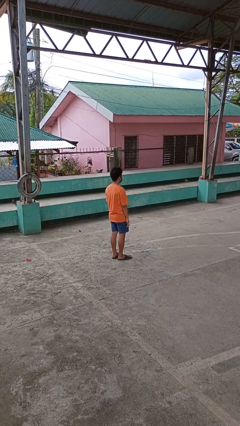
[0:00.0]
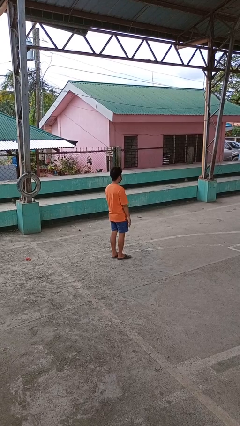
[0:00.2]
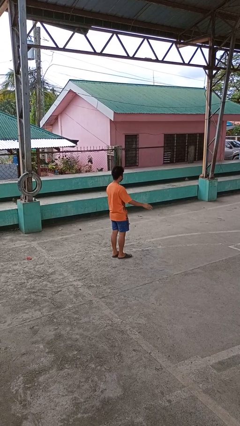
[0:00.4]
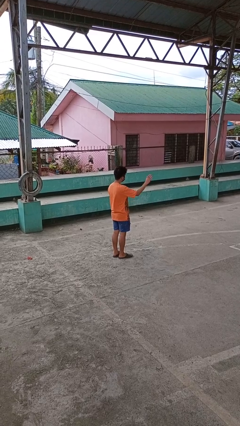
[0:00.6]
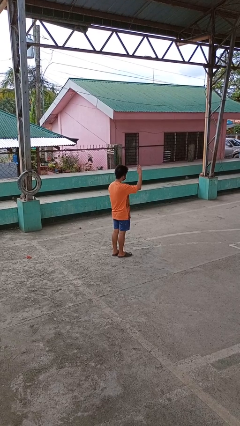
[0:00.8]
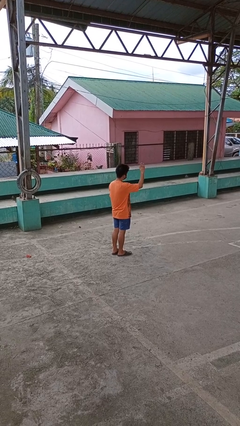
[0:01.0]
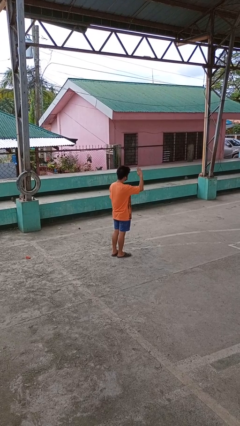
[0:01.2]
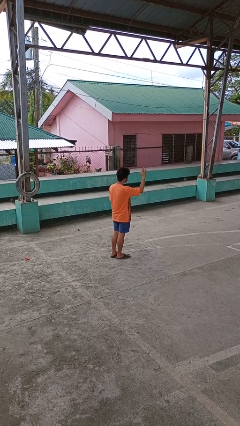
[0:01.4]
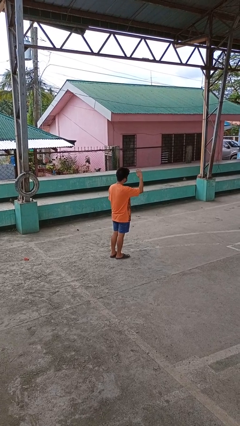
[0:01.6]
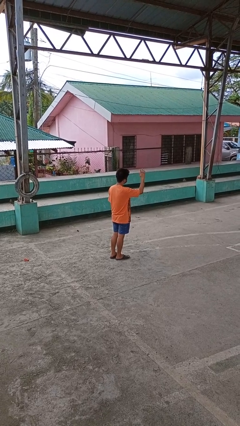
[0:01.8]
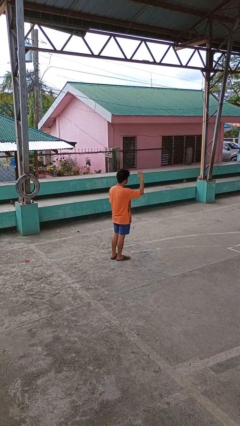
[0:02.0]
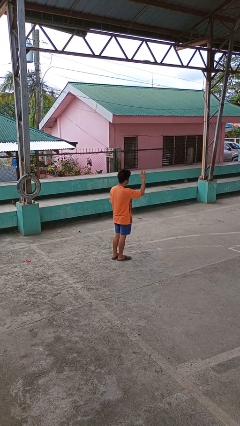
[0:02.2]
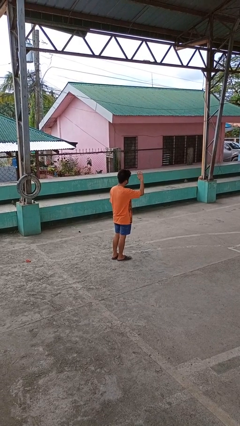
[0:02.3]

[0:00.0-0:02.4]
person waves at person

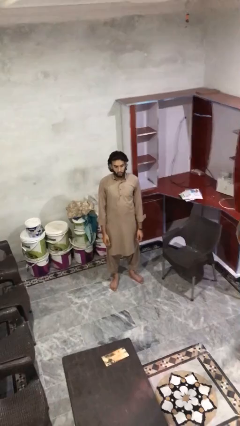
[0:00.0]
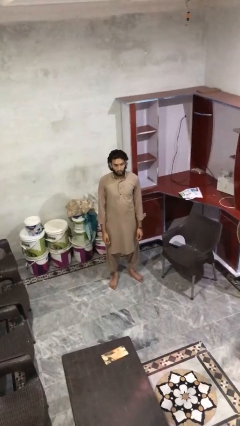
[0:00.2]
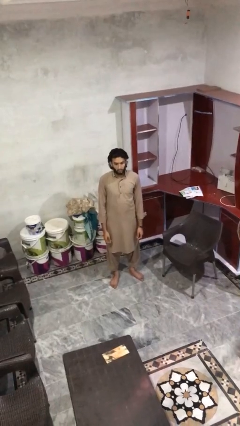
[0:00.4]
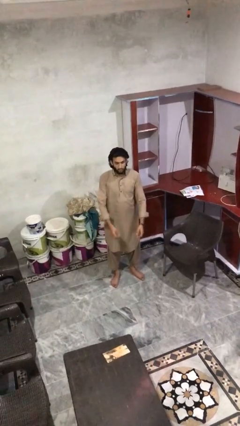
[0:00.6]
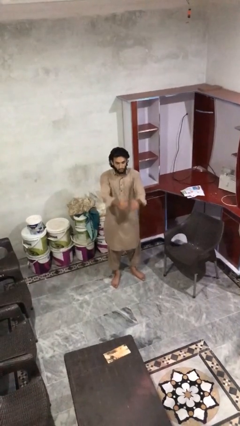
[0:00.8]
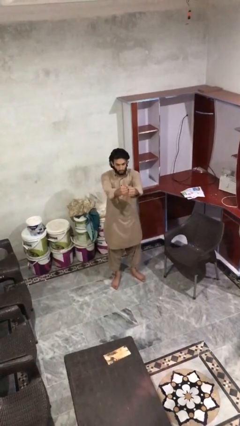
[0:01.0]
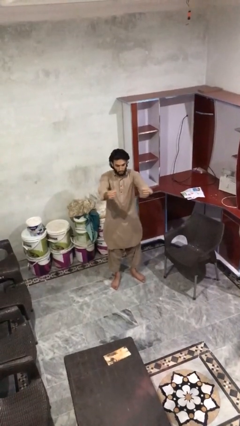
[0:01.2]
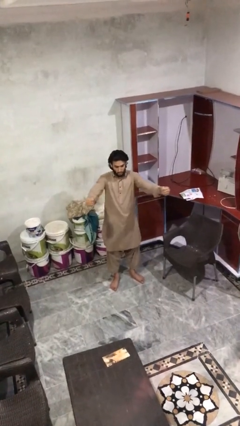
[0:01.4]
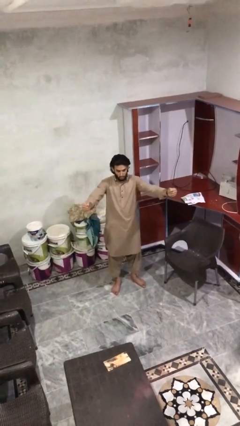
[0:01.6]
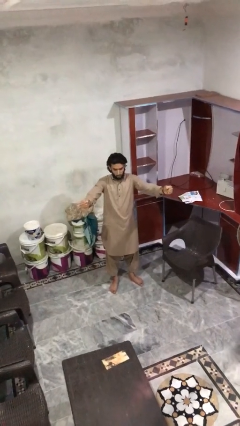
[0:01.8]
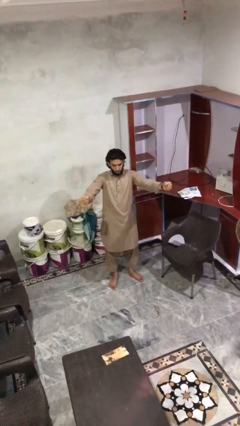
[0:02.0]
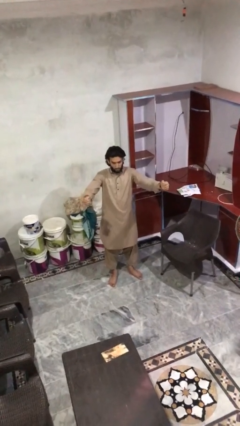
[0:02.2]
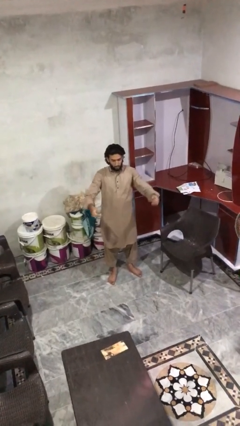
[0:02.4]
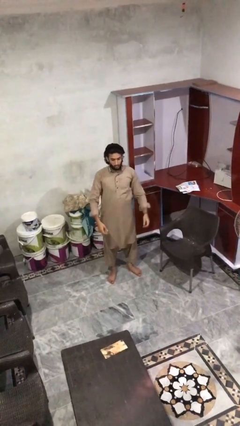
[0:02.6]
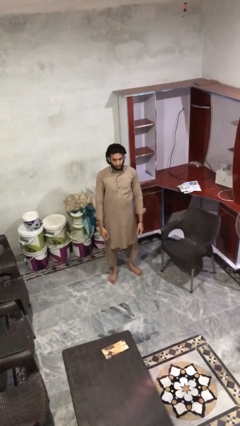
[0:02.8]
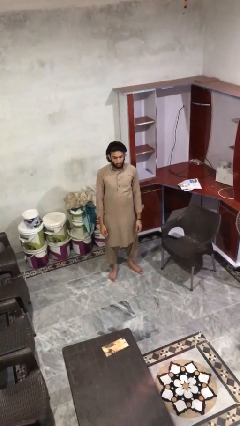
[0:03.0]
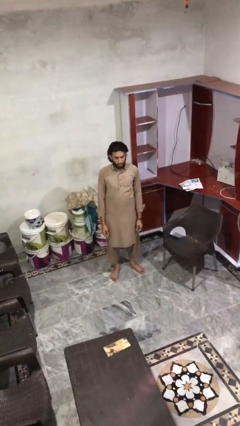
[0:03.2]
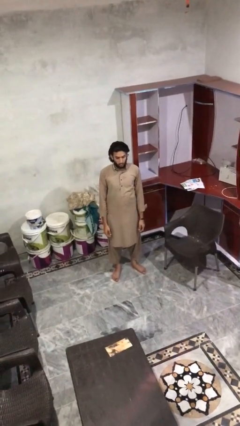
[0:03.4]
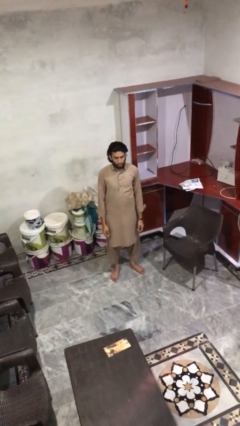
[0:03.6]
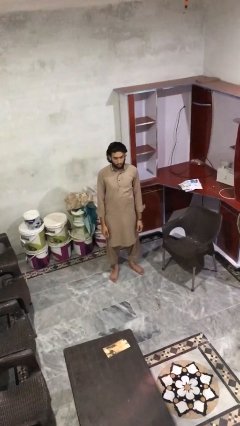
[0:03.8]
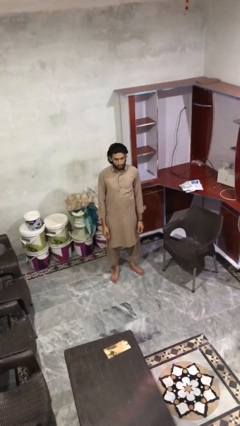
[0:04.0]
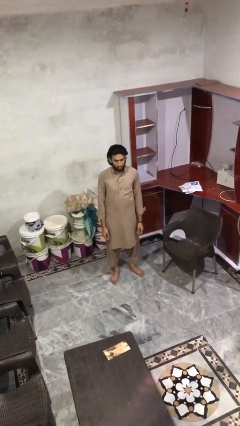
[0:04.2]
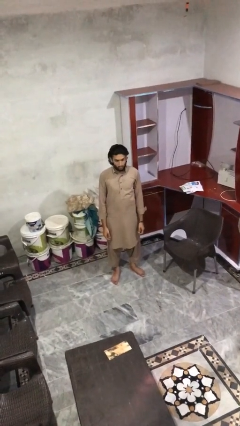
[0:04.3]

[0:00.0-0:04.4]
person gestures zoom in

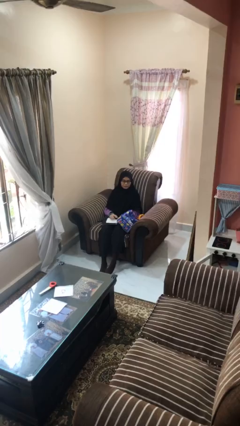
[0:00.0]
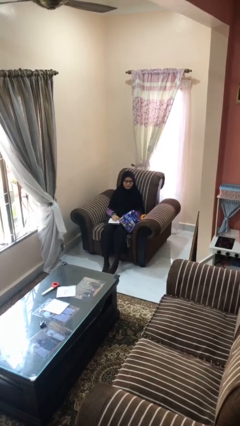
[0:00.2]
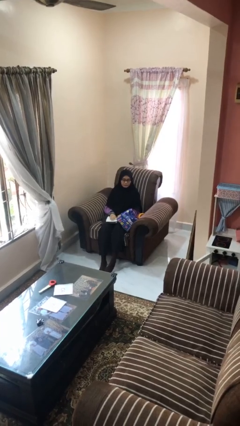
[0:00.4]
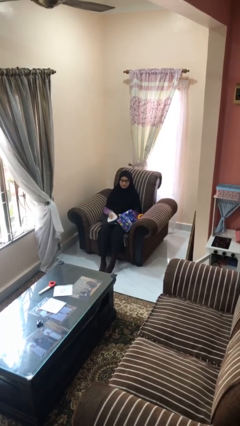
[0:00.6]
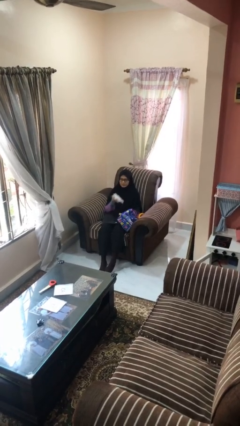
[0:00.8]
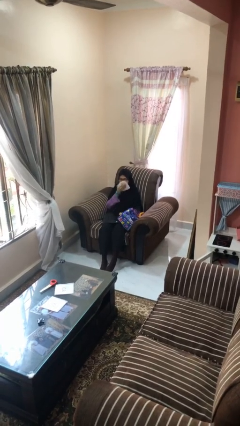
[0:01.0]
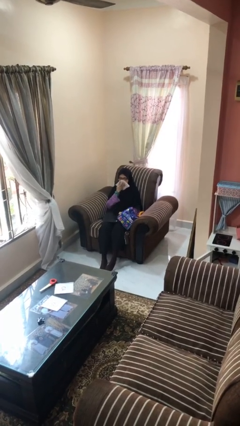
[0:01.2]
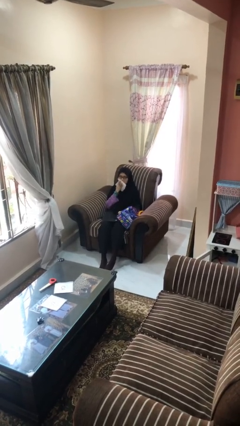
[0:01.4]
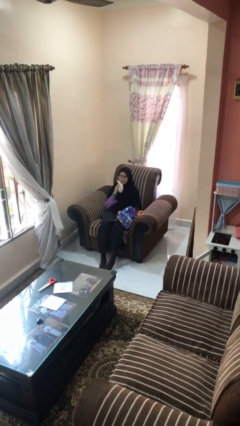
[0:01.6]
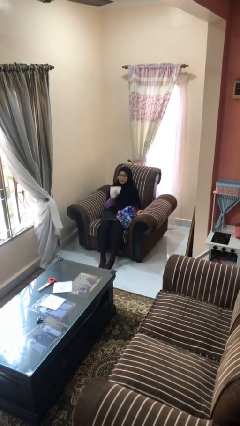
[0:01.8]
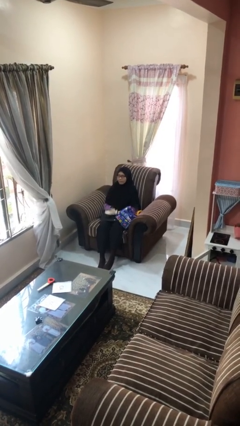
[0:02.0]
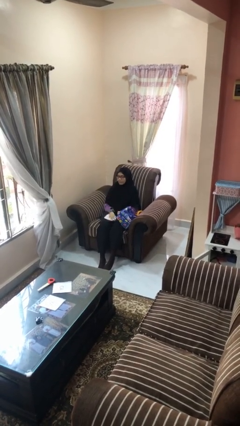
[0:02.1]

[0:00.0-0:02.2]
person wipes mouth with napkin

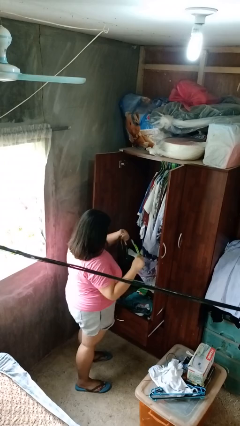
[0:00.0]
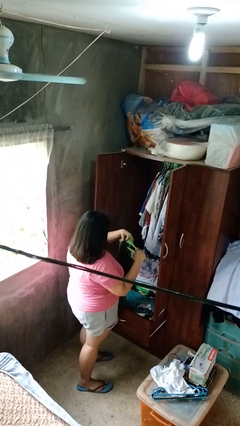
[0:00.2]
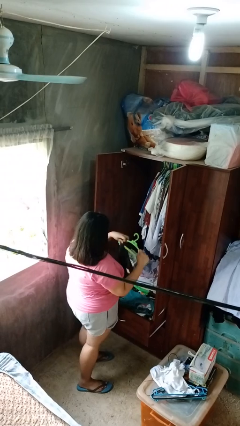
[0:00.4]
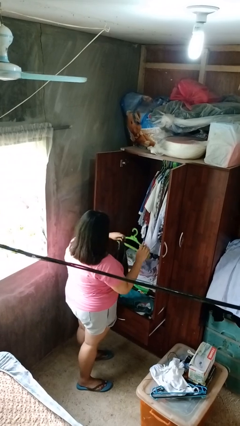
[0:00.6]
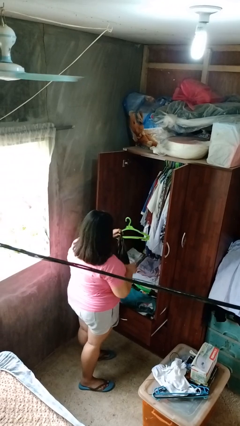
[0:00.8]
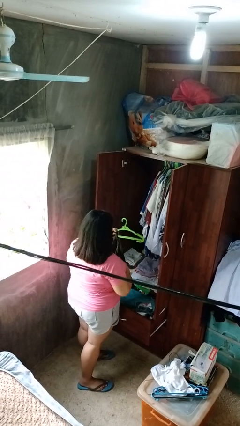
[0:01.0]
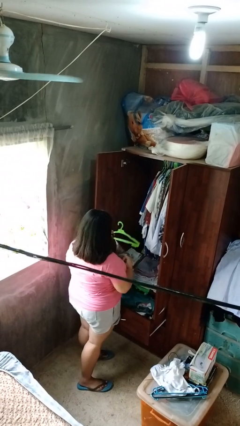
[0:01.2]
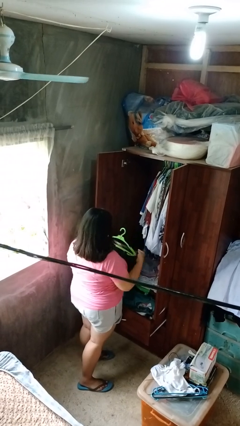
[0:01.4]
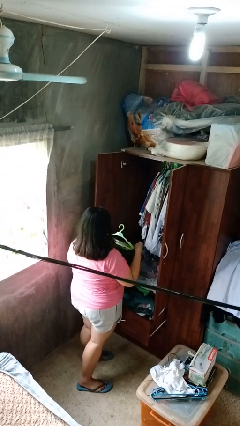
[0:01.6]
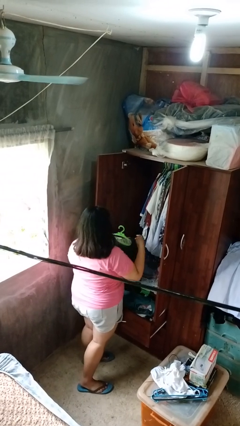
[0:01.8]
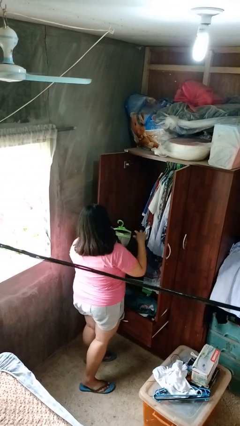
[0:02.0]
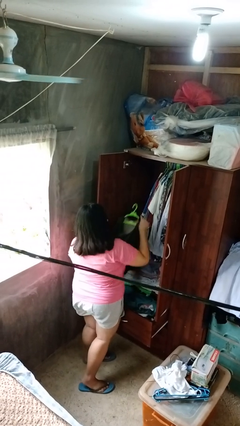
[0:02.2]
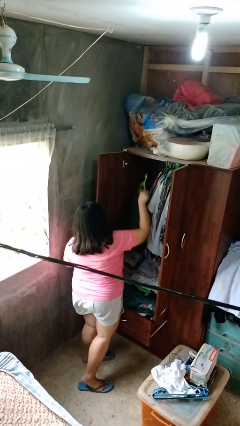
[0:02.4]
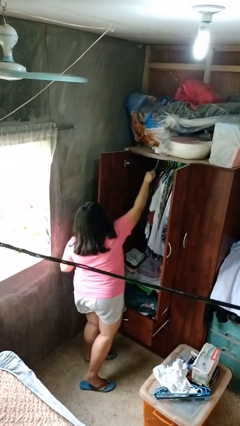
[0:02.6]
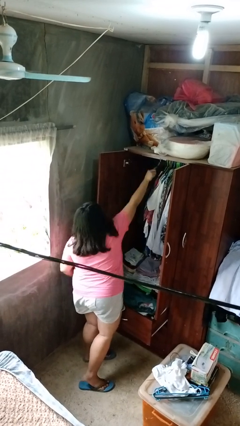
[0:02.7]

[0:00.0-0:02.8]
person puts clothes into closet

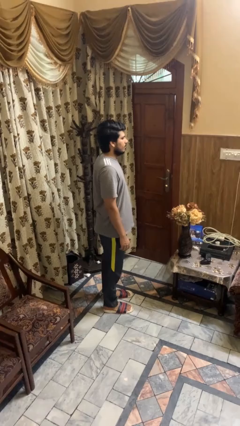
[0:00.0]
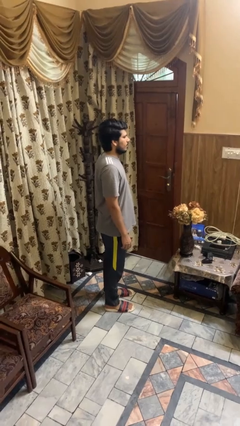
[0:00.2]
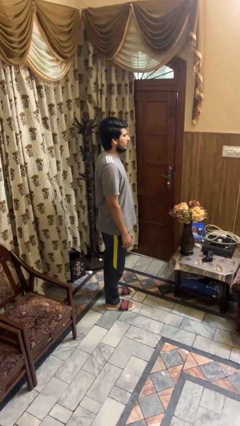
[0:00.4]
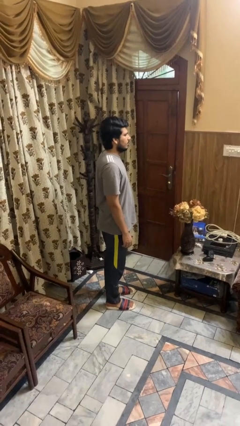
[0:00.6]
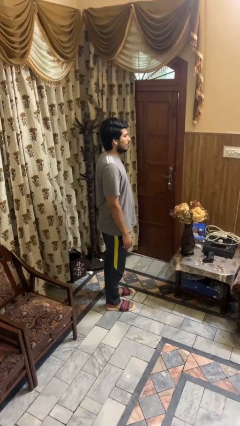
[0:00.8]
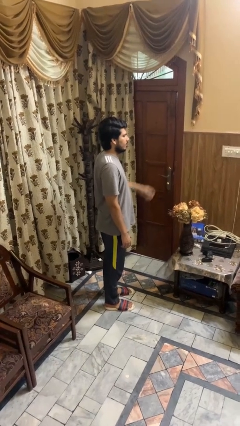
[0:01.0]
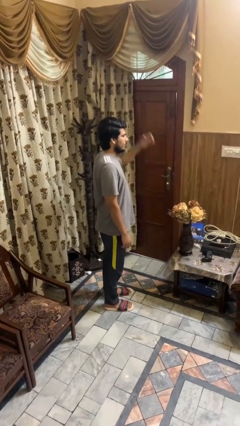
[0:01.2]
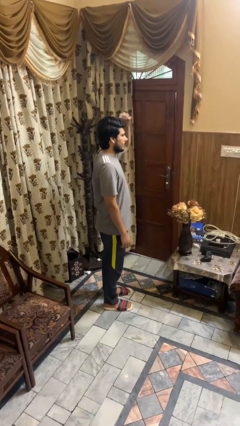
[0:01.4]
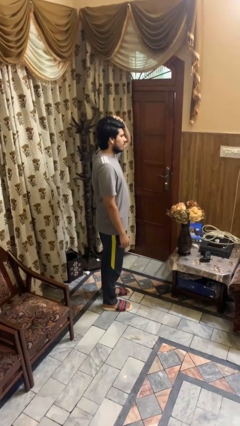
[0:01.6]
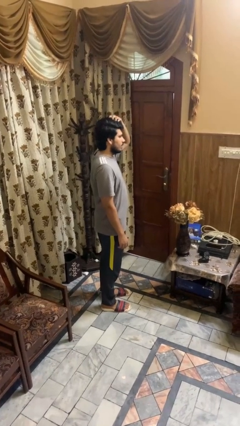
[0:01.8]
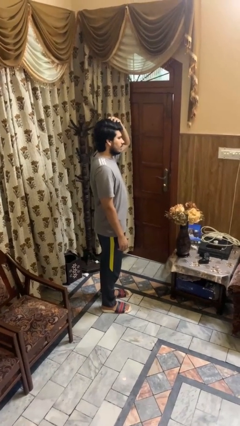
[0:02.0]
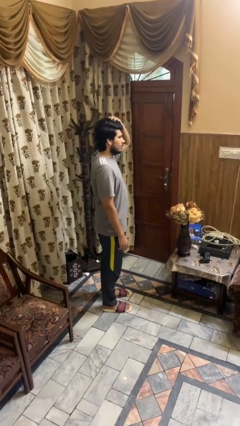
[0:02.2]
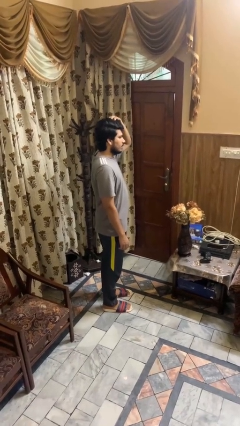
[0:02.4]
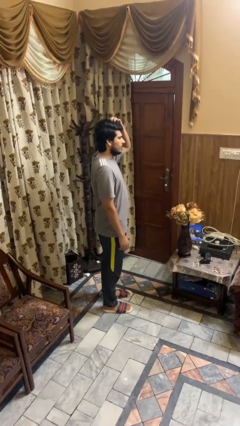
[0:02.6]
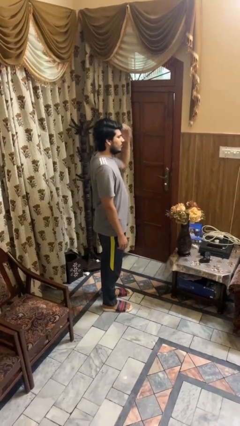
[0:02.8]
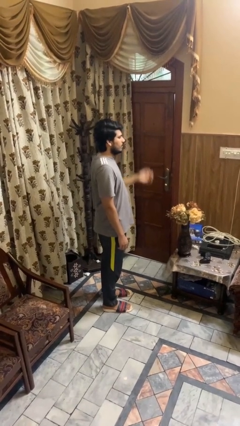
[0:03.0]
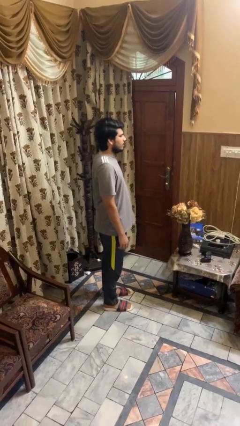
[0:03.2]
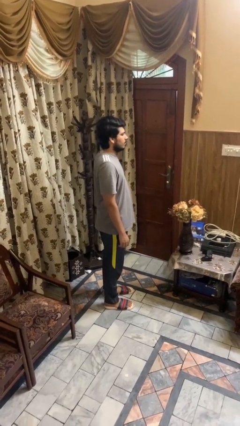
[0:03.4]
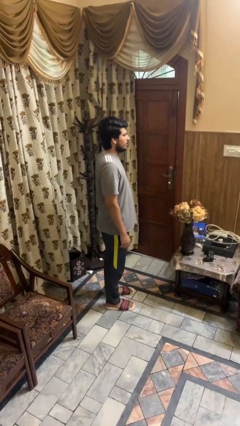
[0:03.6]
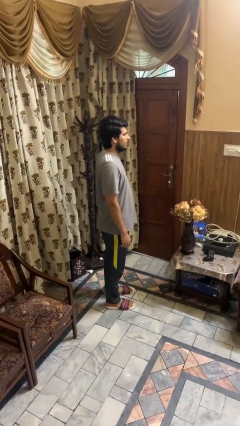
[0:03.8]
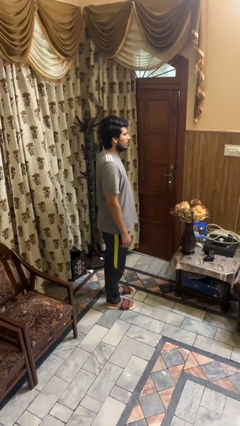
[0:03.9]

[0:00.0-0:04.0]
person scratches face

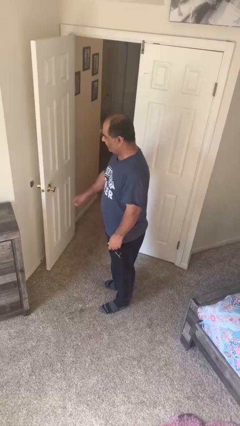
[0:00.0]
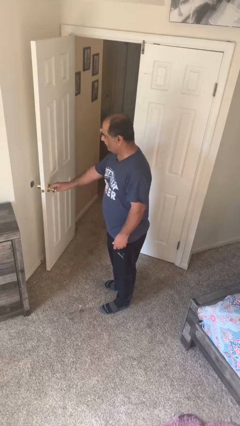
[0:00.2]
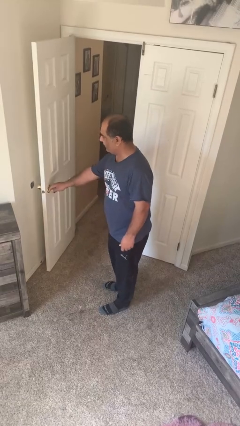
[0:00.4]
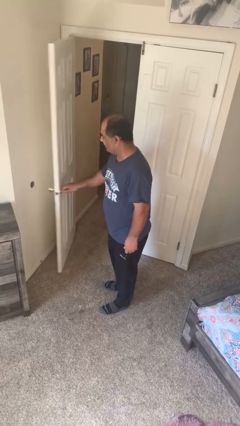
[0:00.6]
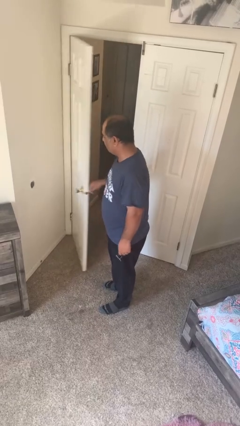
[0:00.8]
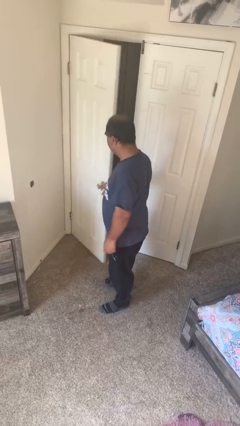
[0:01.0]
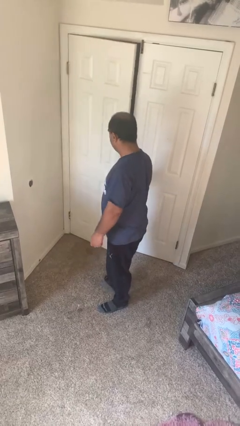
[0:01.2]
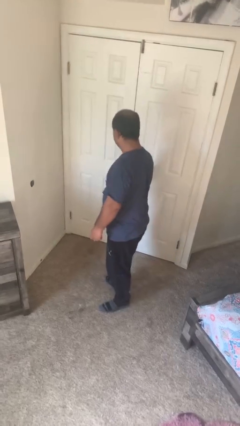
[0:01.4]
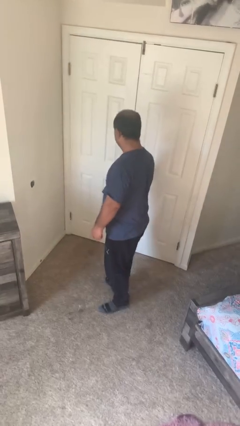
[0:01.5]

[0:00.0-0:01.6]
person closes facility door
